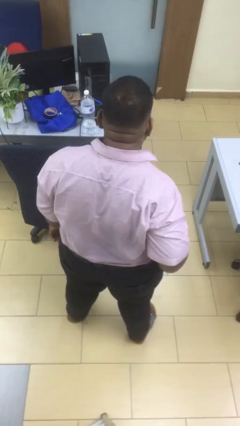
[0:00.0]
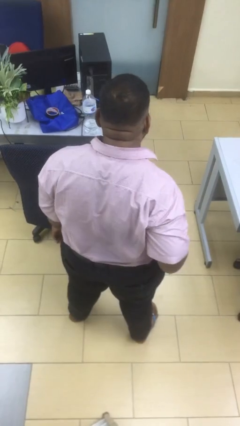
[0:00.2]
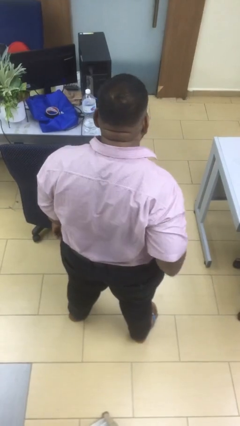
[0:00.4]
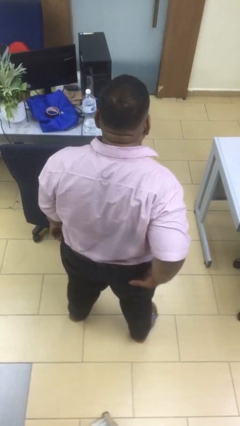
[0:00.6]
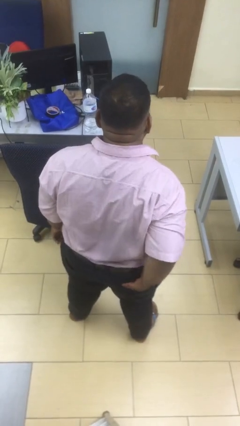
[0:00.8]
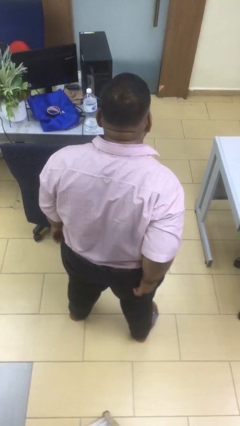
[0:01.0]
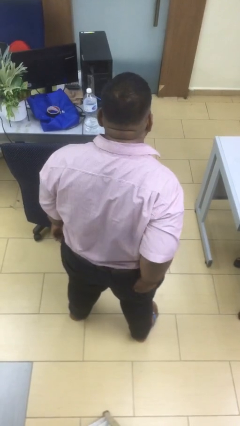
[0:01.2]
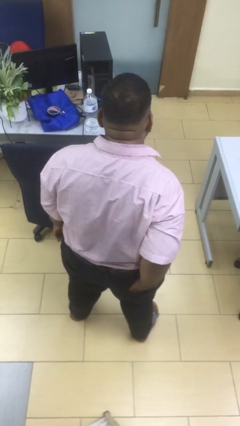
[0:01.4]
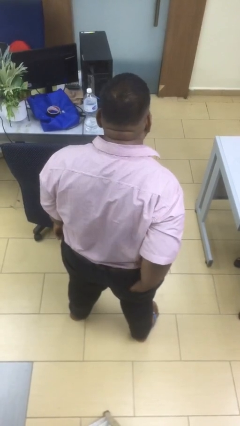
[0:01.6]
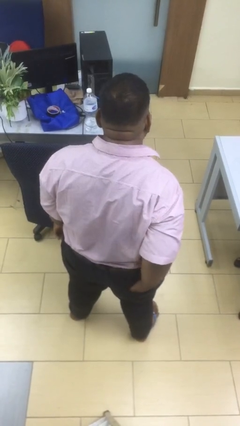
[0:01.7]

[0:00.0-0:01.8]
person puts hands in back pockets

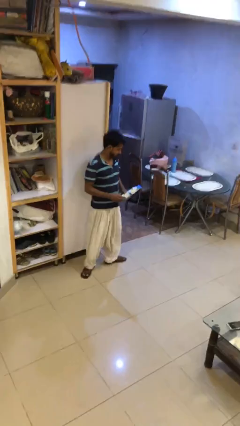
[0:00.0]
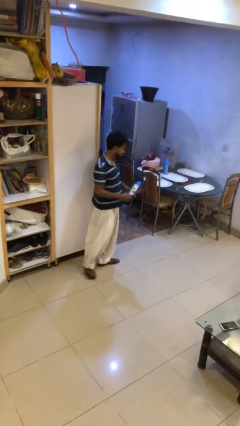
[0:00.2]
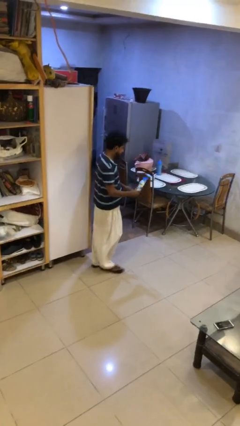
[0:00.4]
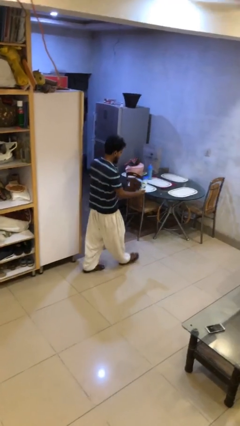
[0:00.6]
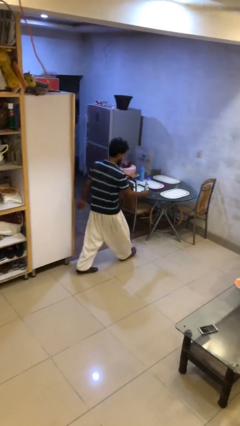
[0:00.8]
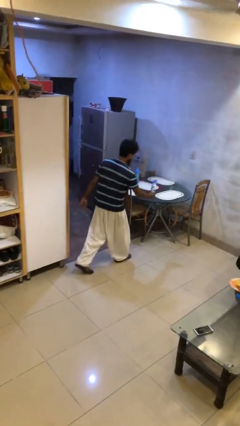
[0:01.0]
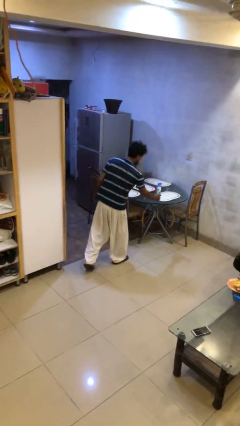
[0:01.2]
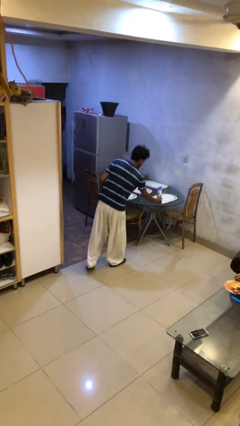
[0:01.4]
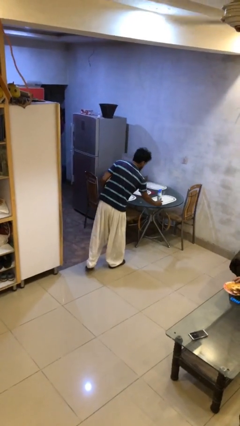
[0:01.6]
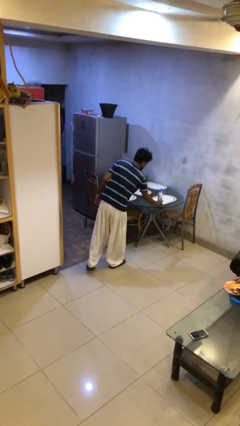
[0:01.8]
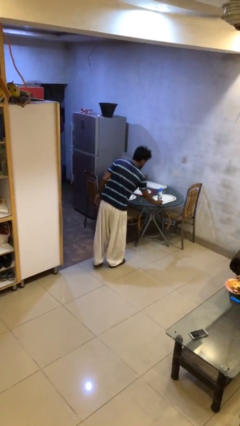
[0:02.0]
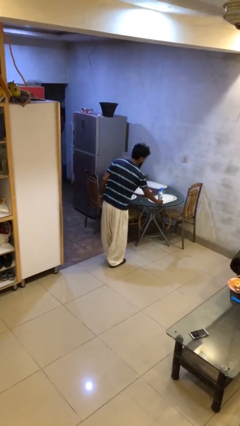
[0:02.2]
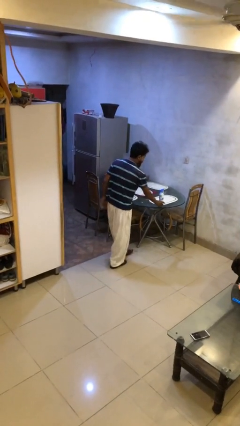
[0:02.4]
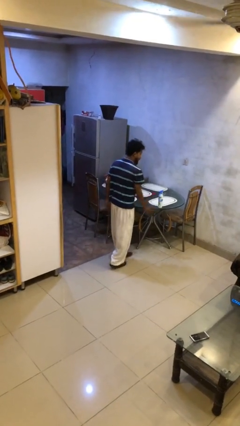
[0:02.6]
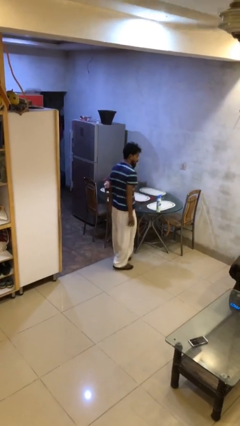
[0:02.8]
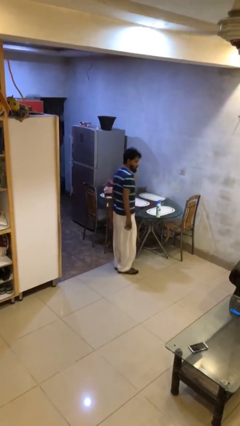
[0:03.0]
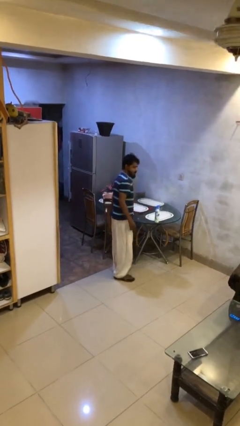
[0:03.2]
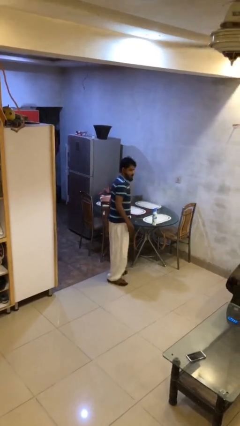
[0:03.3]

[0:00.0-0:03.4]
person puts down object on table

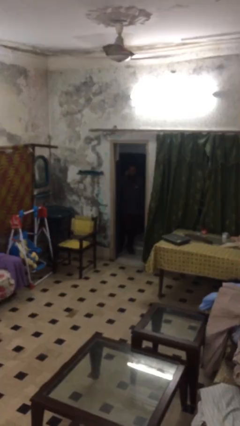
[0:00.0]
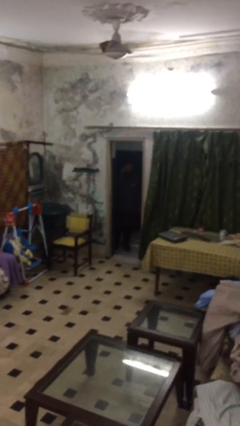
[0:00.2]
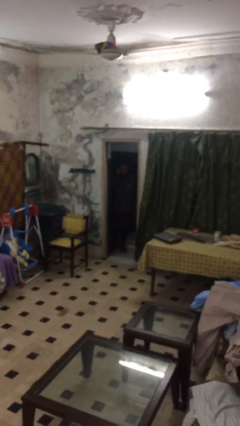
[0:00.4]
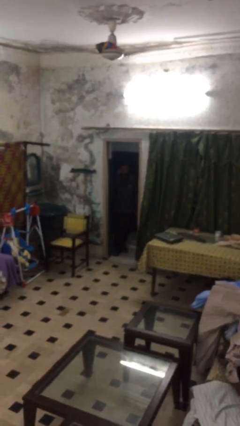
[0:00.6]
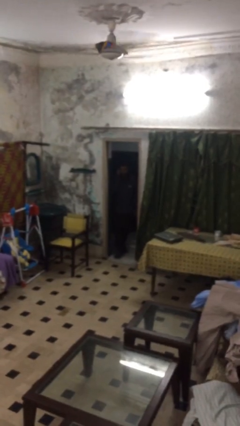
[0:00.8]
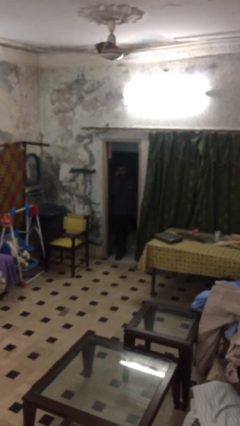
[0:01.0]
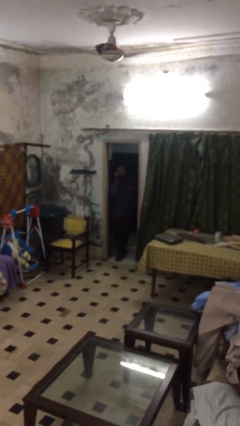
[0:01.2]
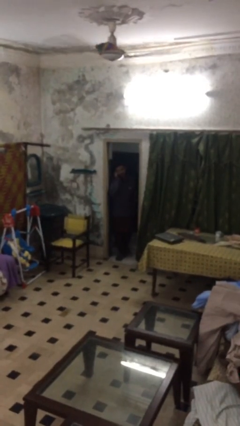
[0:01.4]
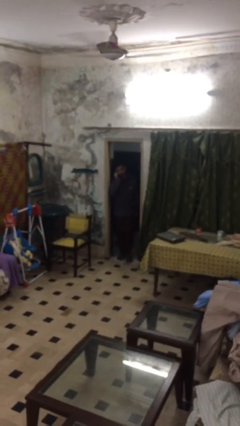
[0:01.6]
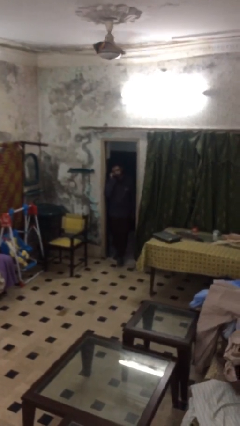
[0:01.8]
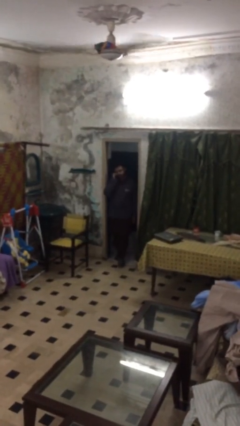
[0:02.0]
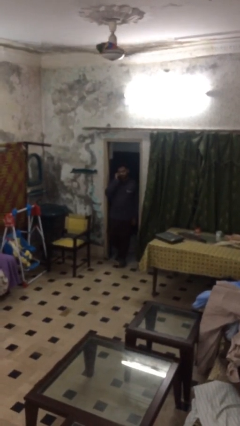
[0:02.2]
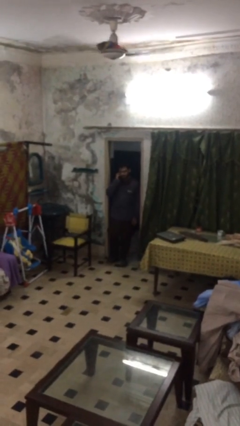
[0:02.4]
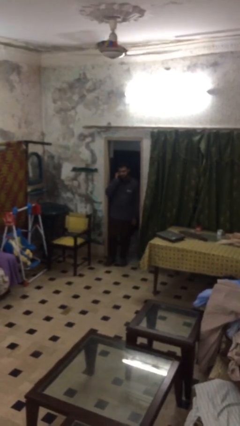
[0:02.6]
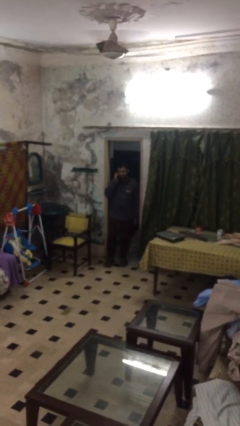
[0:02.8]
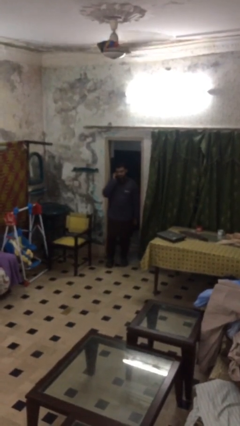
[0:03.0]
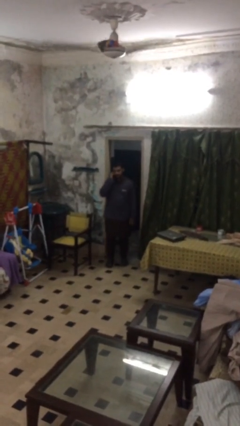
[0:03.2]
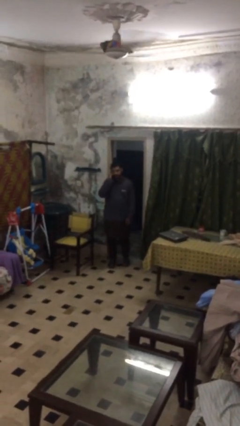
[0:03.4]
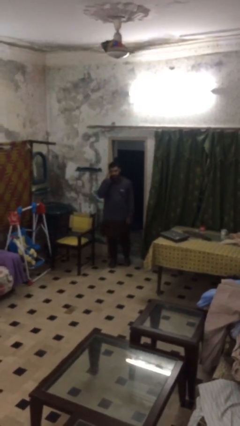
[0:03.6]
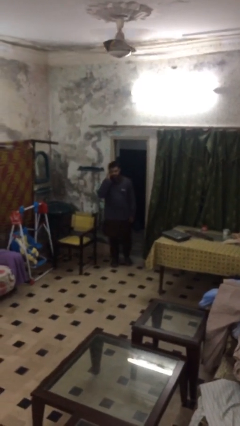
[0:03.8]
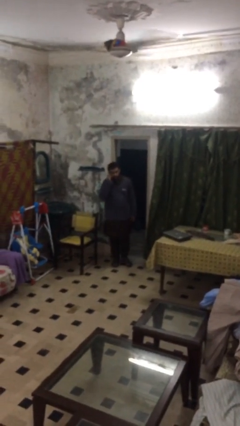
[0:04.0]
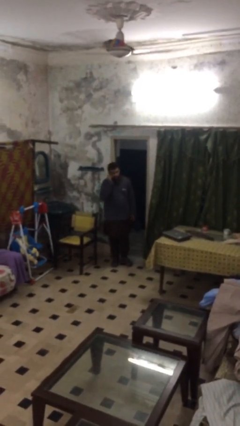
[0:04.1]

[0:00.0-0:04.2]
person enters scene through structure

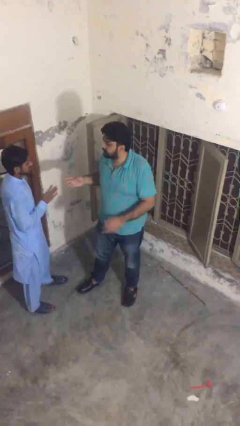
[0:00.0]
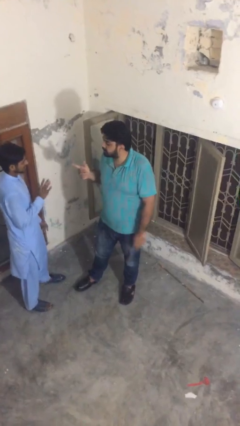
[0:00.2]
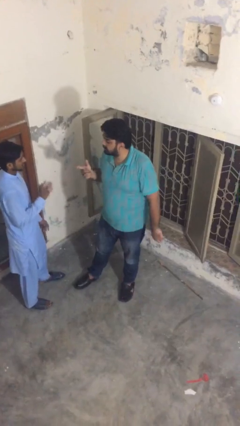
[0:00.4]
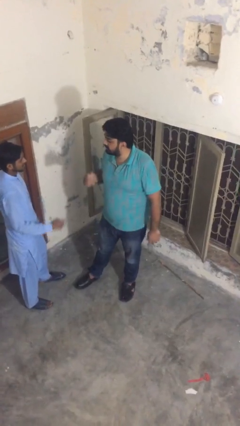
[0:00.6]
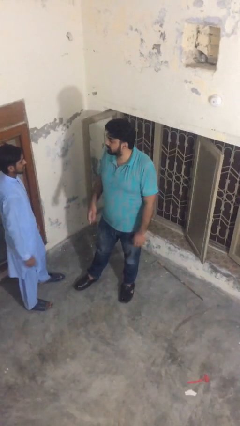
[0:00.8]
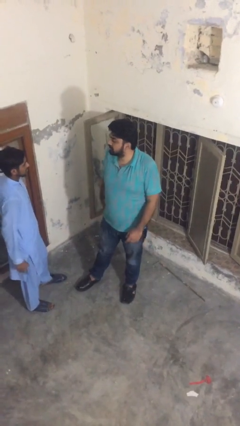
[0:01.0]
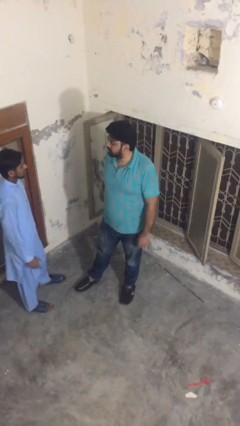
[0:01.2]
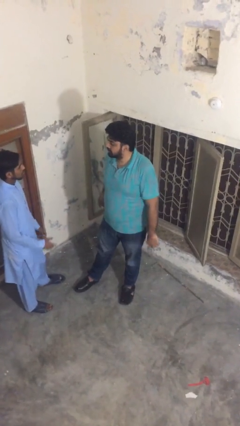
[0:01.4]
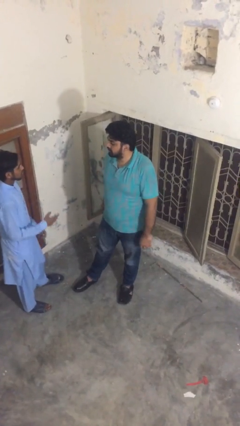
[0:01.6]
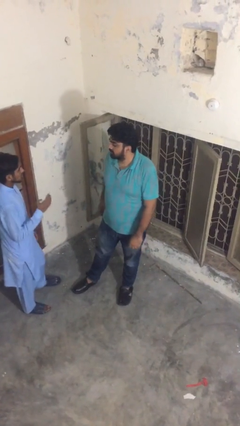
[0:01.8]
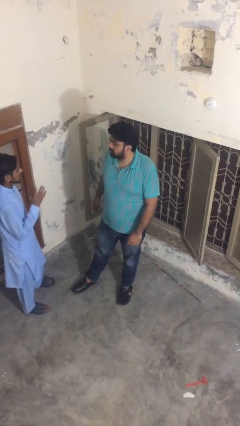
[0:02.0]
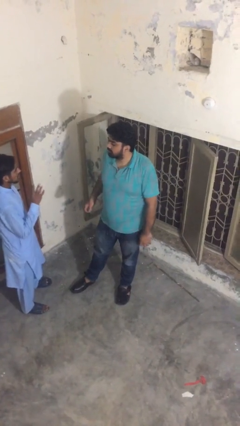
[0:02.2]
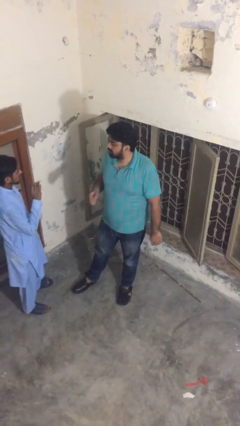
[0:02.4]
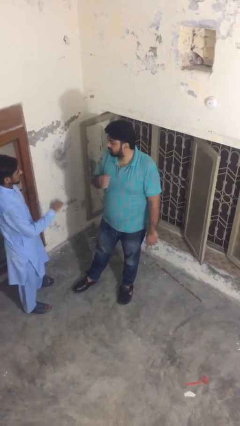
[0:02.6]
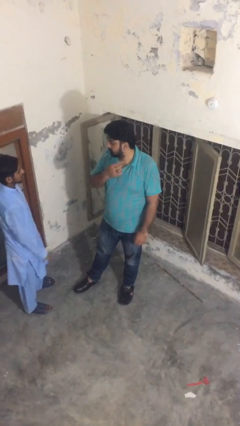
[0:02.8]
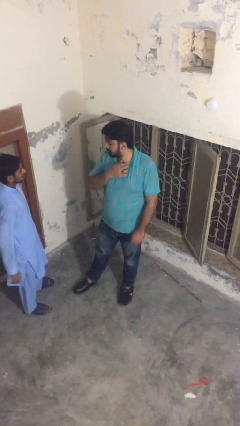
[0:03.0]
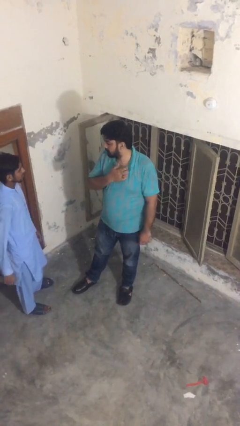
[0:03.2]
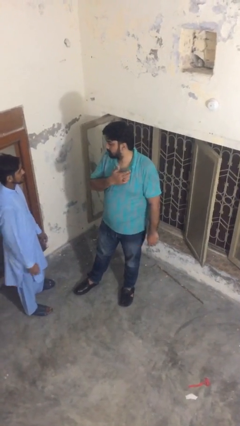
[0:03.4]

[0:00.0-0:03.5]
person talks to person

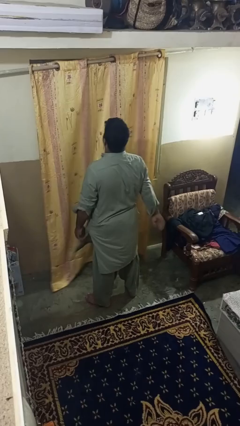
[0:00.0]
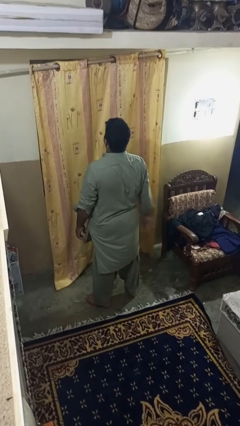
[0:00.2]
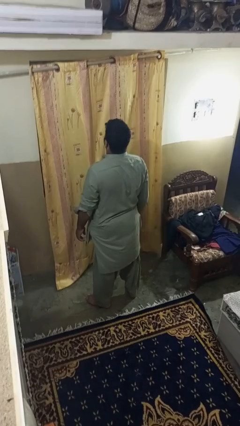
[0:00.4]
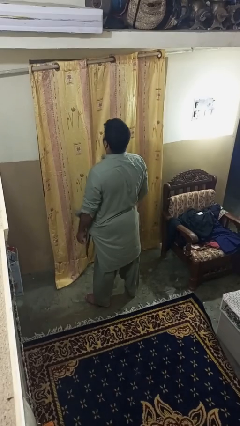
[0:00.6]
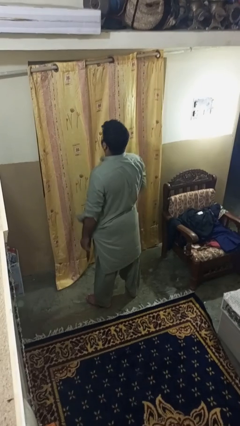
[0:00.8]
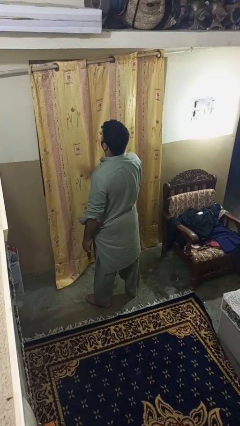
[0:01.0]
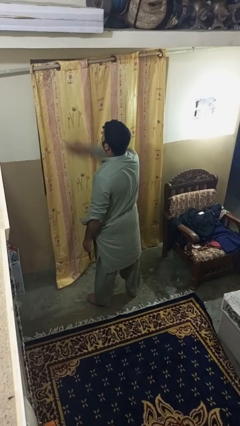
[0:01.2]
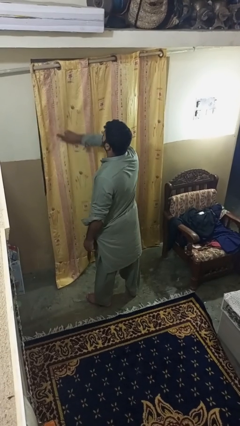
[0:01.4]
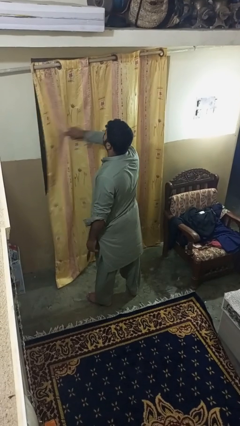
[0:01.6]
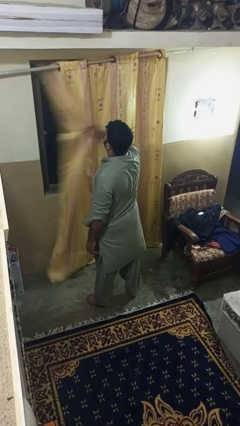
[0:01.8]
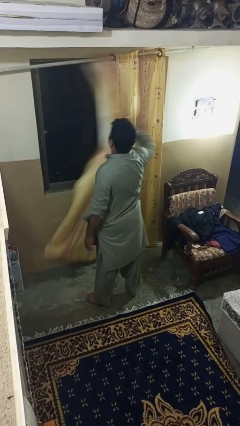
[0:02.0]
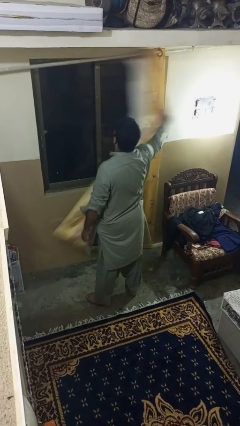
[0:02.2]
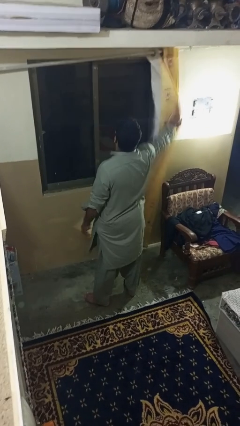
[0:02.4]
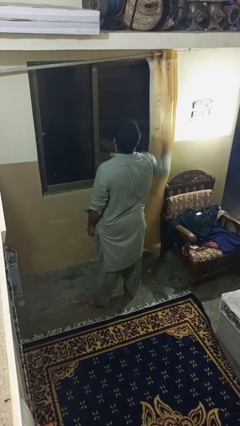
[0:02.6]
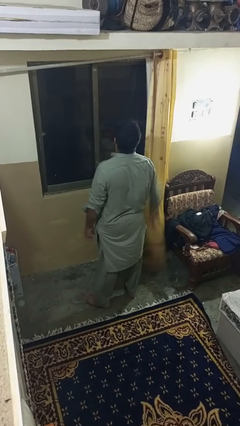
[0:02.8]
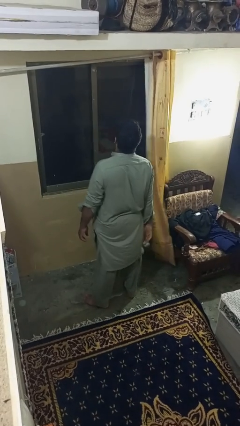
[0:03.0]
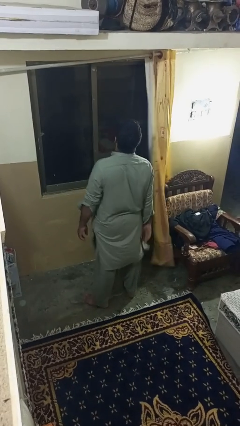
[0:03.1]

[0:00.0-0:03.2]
person opens curtains

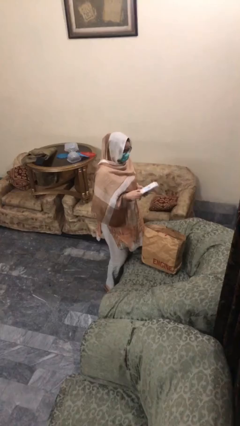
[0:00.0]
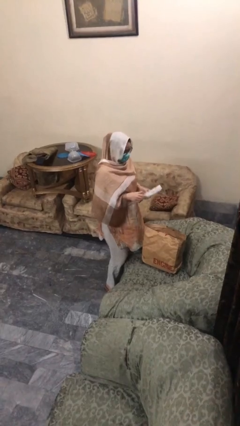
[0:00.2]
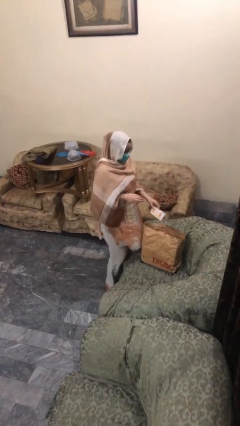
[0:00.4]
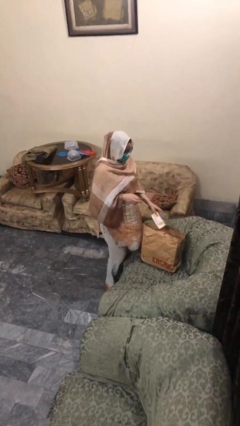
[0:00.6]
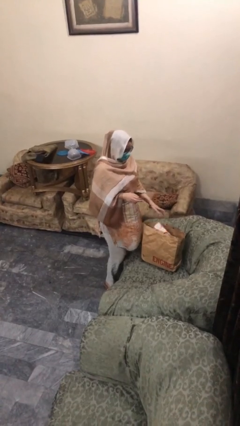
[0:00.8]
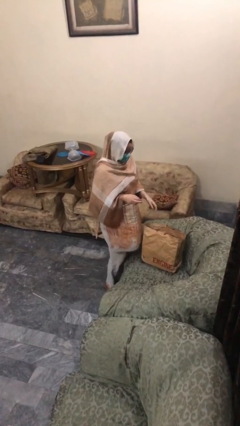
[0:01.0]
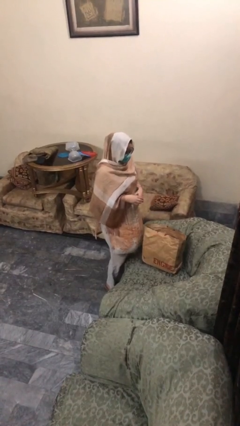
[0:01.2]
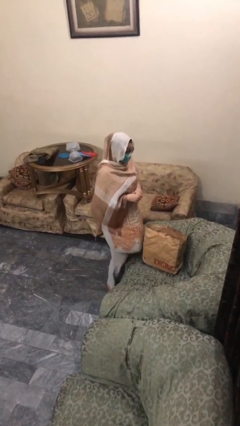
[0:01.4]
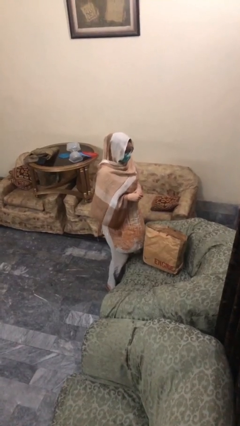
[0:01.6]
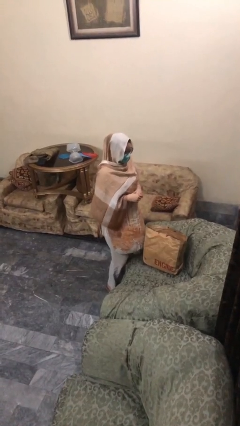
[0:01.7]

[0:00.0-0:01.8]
person puts object into bag
